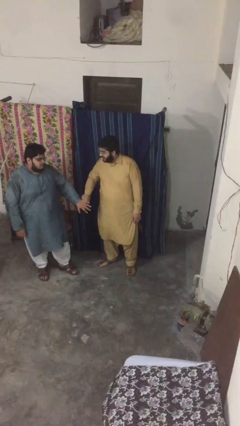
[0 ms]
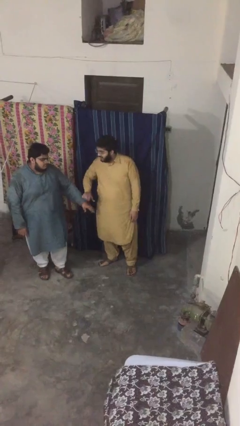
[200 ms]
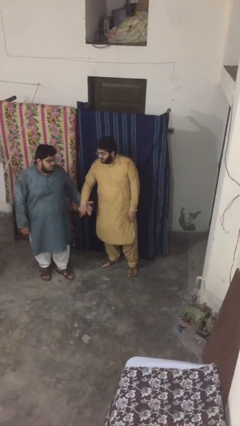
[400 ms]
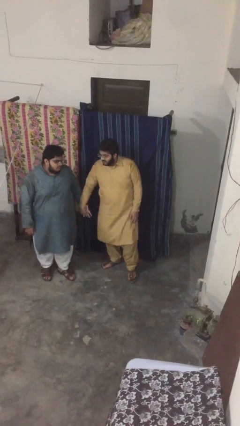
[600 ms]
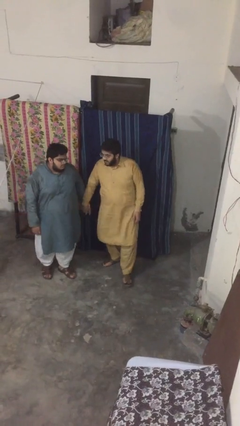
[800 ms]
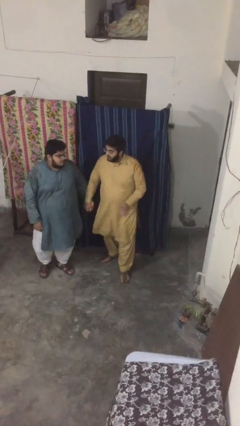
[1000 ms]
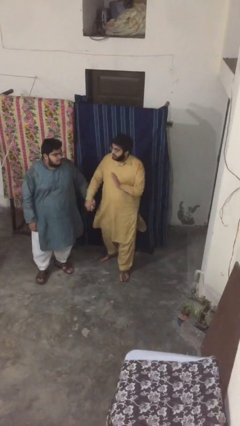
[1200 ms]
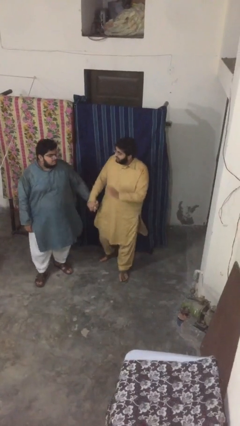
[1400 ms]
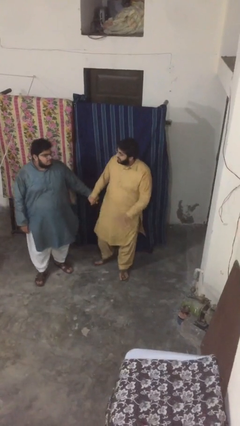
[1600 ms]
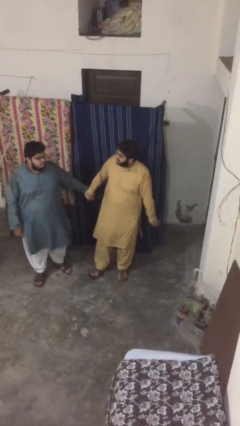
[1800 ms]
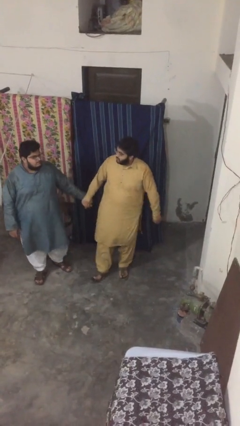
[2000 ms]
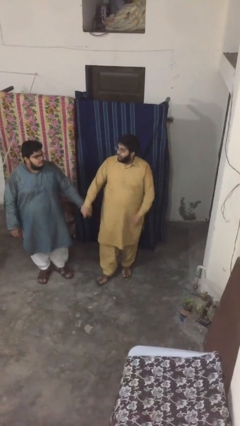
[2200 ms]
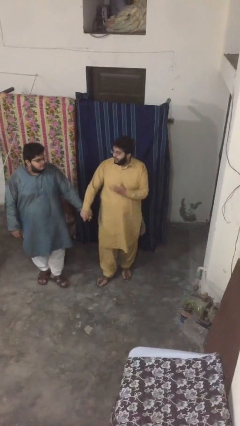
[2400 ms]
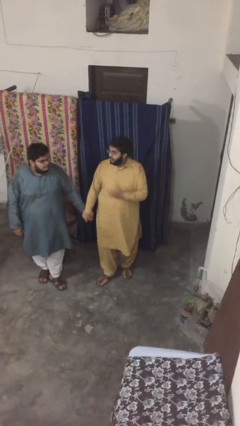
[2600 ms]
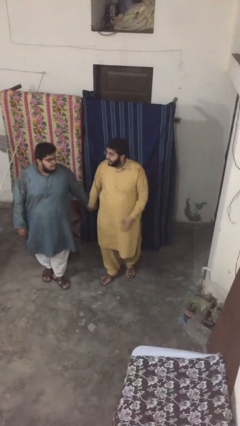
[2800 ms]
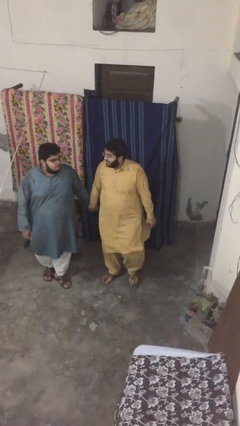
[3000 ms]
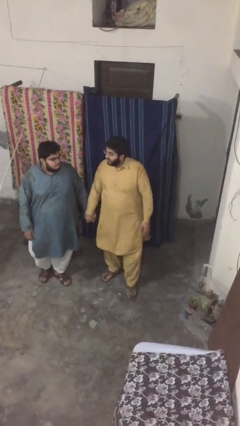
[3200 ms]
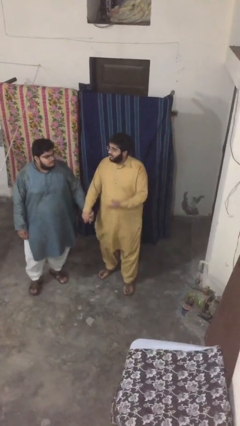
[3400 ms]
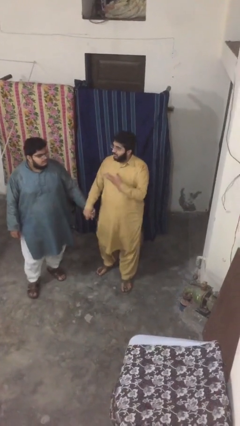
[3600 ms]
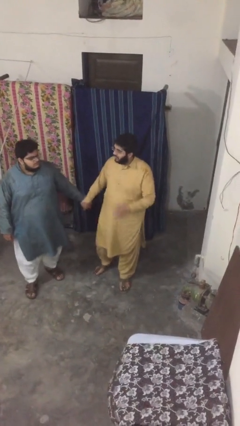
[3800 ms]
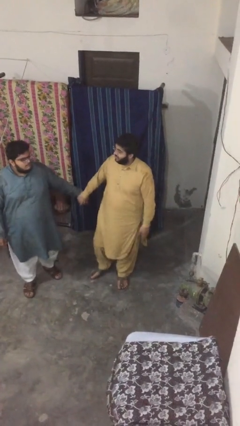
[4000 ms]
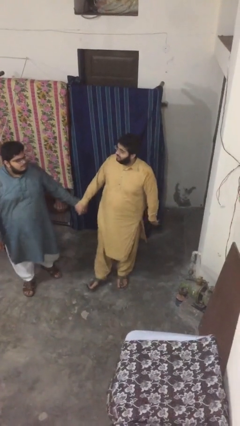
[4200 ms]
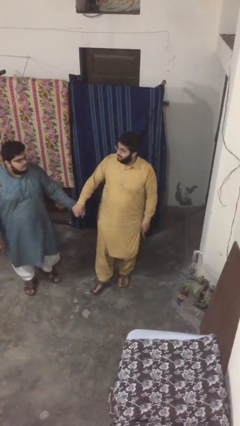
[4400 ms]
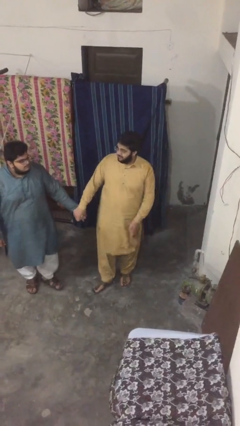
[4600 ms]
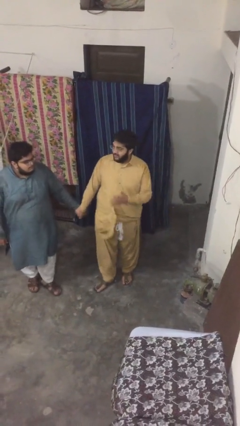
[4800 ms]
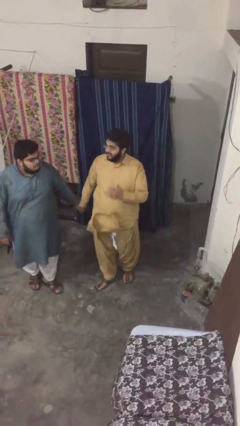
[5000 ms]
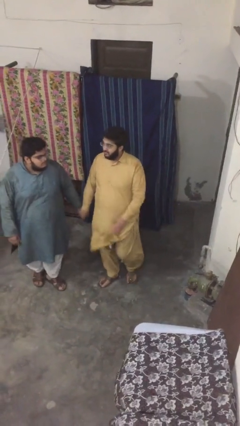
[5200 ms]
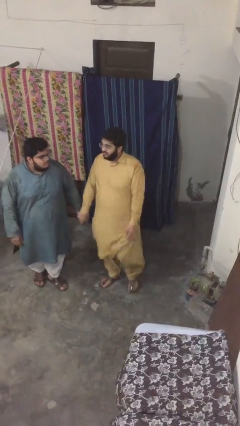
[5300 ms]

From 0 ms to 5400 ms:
person holds hand

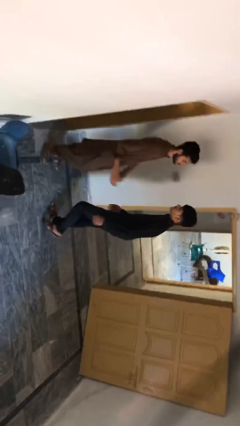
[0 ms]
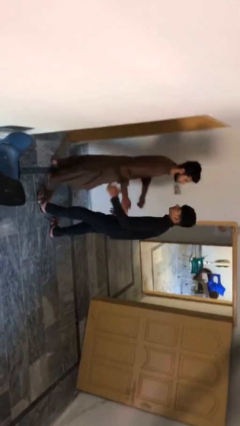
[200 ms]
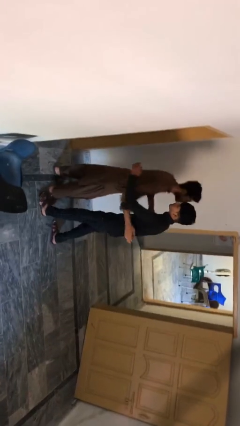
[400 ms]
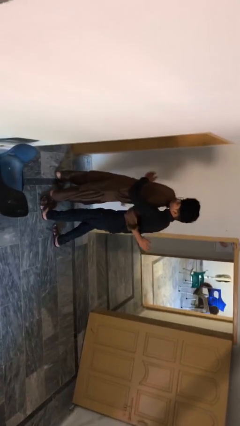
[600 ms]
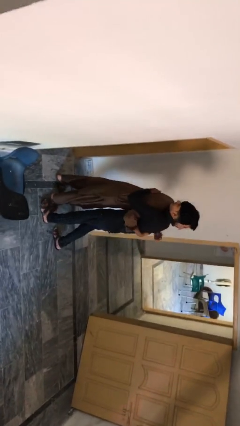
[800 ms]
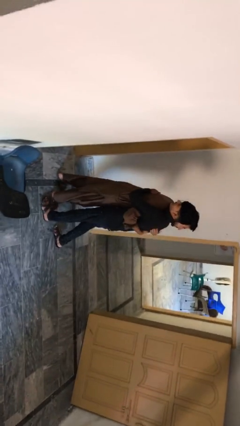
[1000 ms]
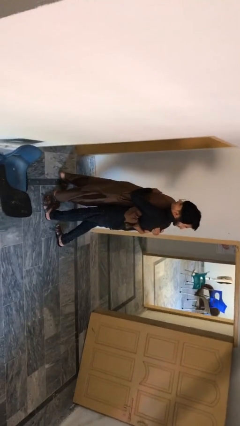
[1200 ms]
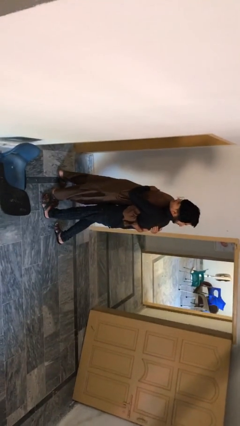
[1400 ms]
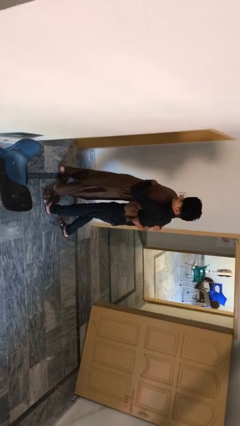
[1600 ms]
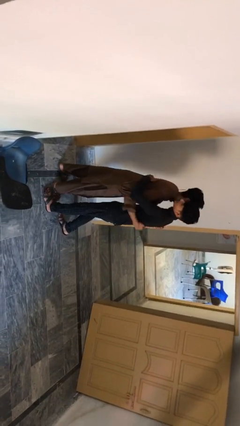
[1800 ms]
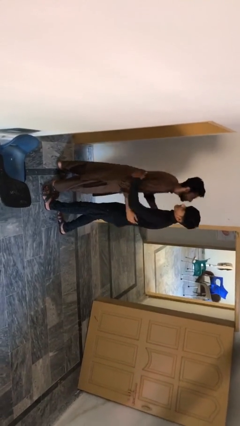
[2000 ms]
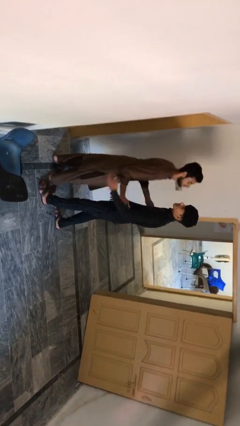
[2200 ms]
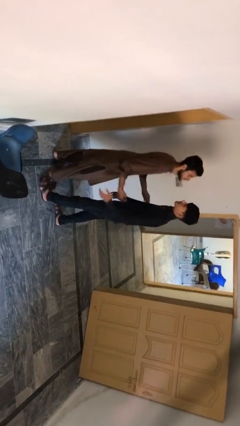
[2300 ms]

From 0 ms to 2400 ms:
person embraces person

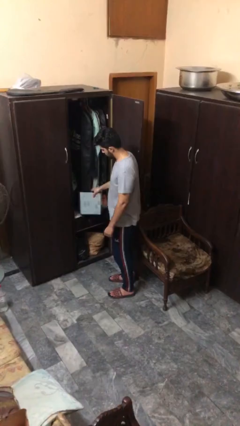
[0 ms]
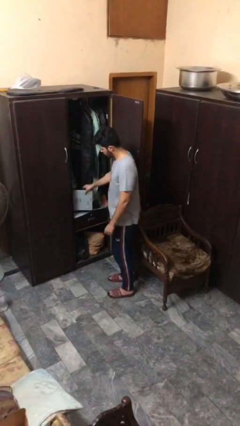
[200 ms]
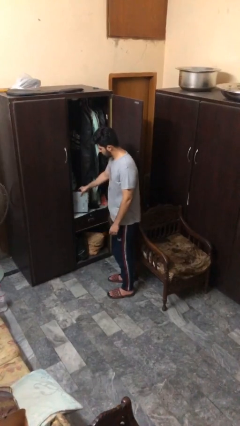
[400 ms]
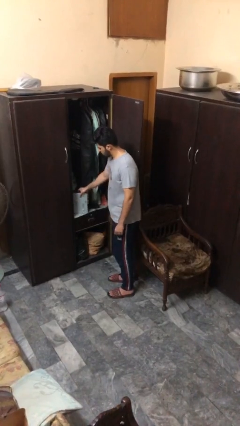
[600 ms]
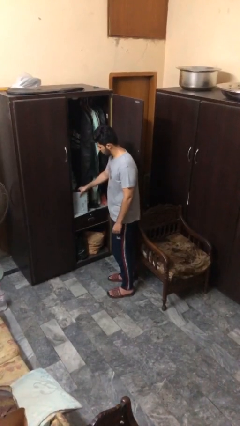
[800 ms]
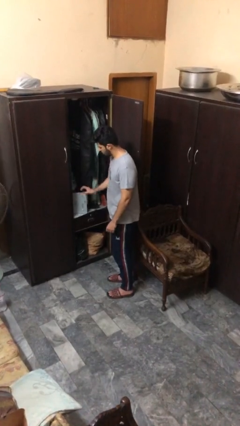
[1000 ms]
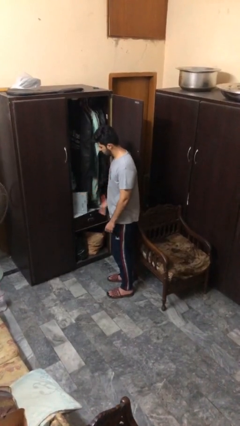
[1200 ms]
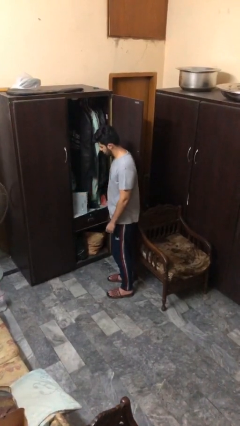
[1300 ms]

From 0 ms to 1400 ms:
person puts down object into cabinet

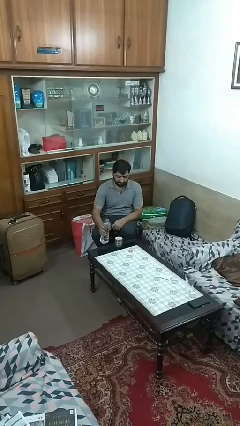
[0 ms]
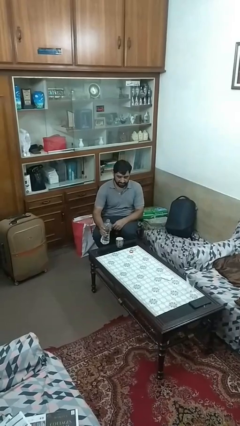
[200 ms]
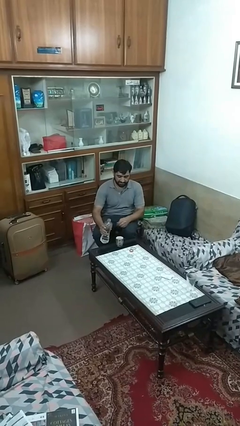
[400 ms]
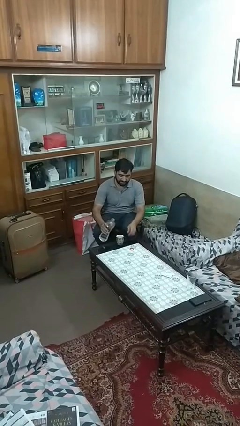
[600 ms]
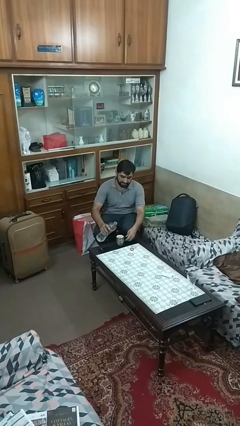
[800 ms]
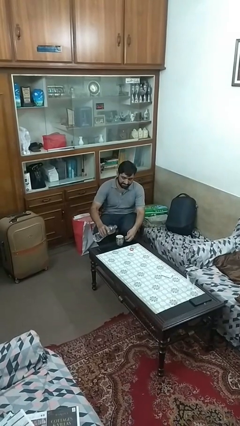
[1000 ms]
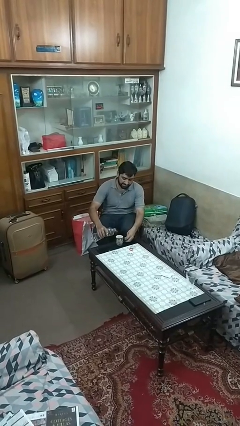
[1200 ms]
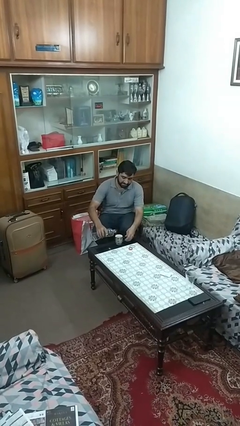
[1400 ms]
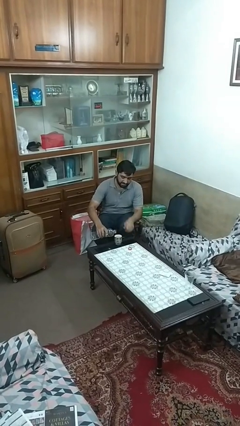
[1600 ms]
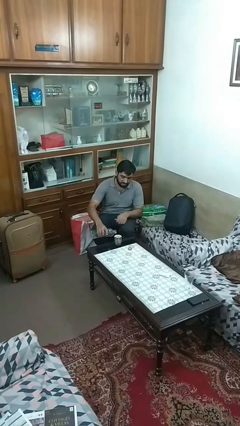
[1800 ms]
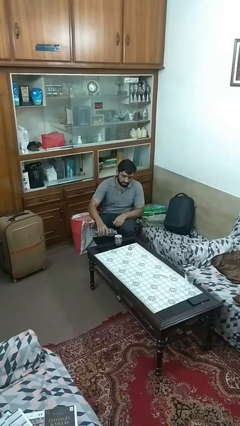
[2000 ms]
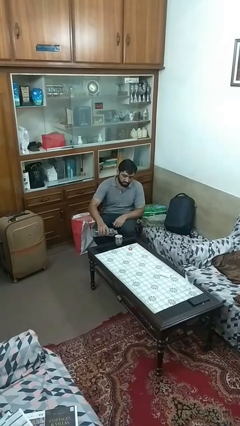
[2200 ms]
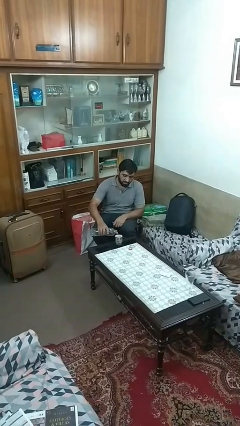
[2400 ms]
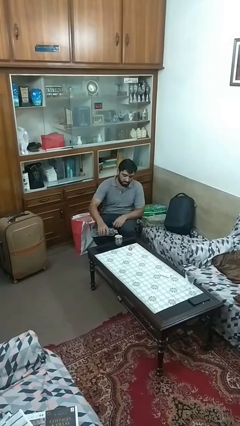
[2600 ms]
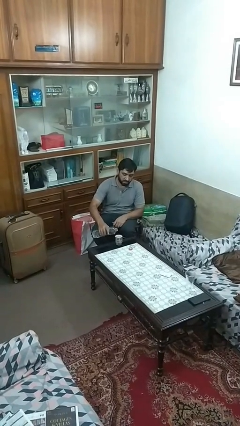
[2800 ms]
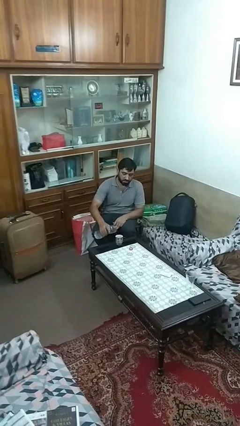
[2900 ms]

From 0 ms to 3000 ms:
person pours liquid into cup

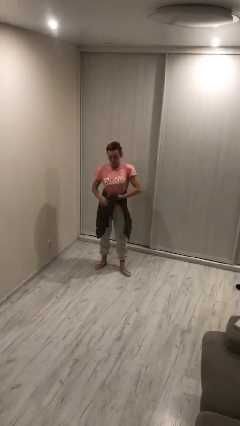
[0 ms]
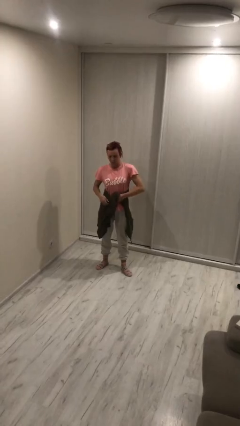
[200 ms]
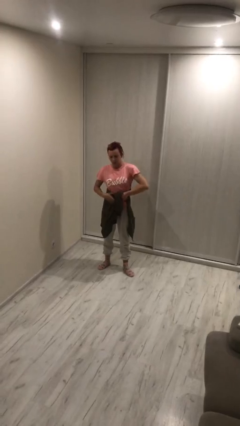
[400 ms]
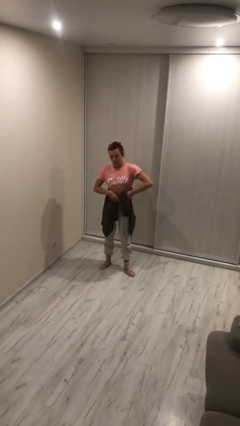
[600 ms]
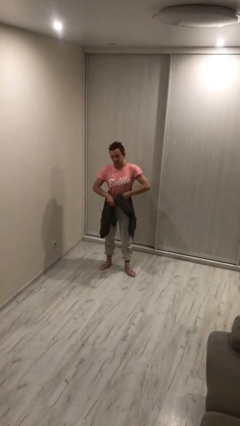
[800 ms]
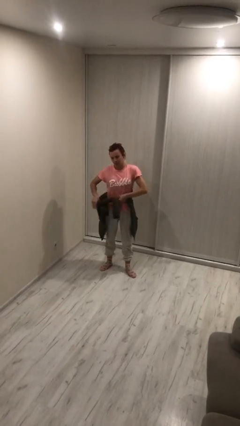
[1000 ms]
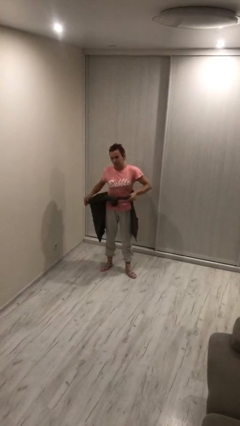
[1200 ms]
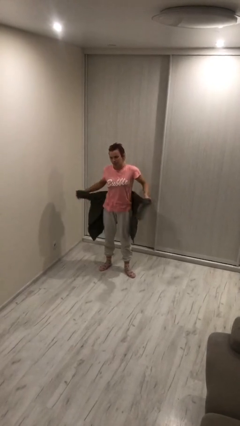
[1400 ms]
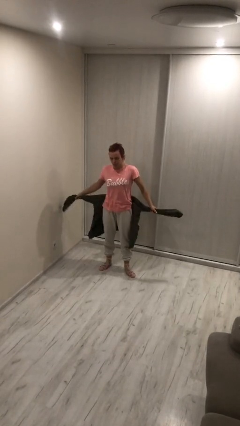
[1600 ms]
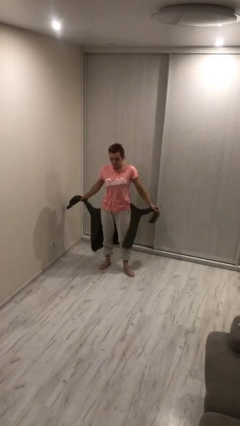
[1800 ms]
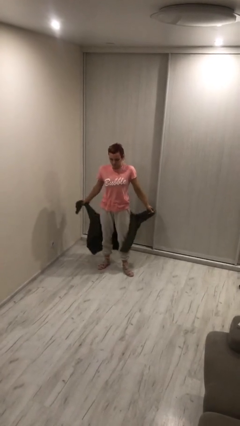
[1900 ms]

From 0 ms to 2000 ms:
person unties jacket around waist

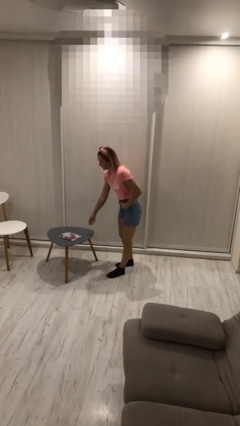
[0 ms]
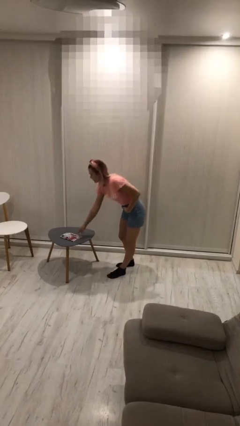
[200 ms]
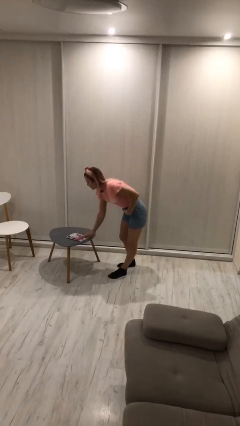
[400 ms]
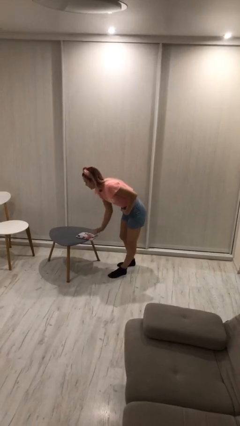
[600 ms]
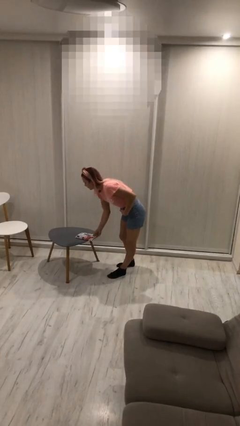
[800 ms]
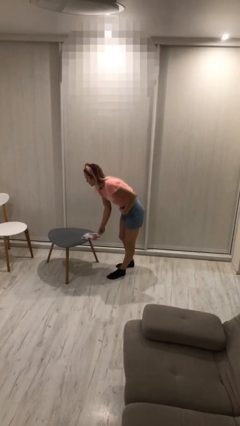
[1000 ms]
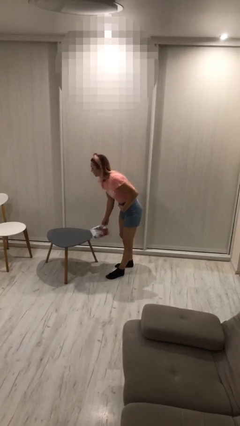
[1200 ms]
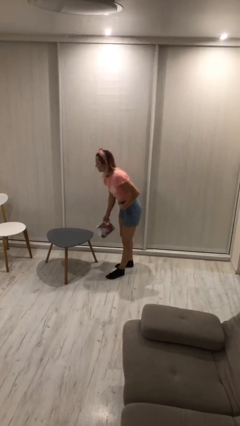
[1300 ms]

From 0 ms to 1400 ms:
person picks up object from table

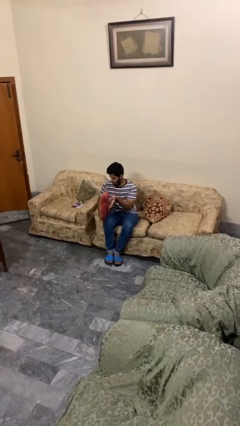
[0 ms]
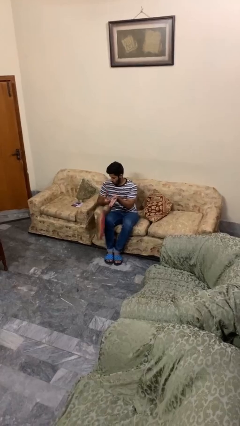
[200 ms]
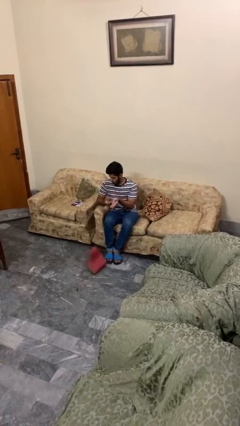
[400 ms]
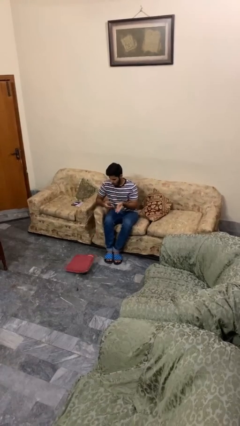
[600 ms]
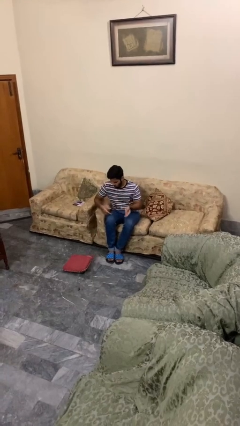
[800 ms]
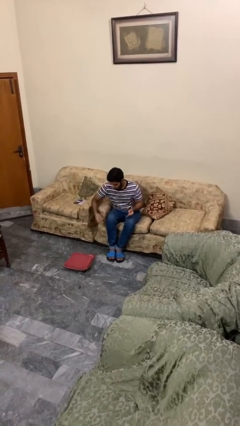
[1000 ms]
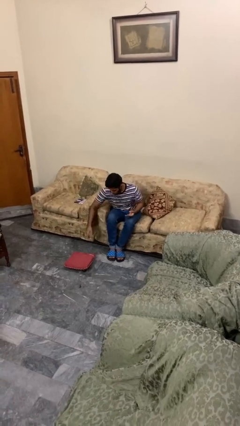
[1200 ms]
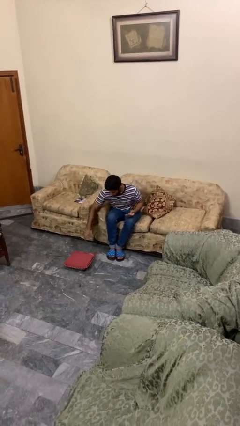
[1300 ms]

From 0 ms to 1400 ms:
person drops object
